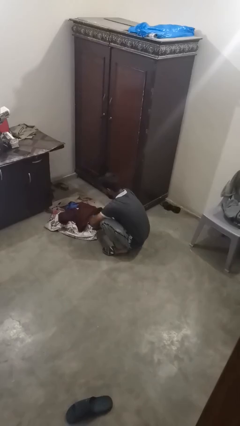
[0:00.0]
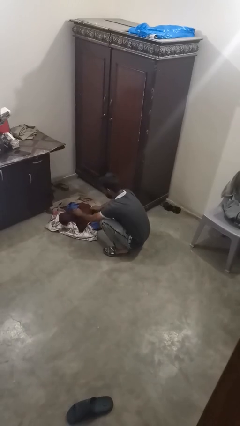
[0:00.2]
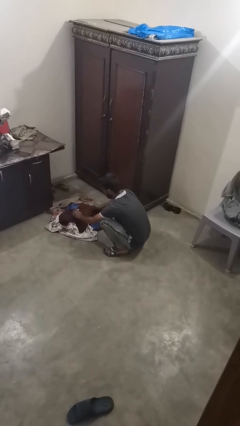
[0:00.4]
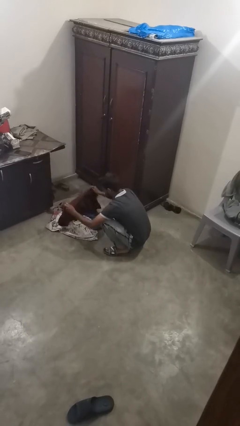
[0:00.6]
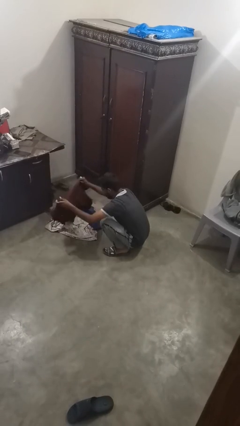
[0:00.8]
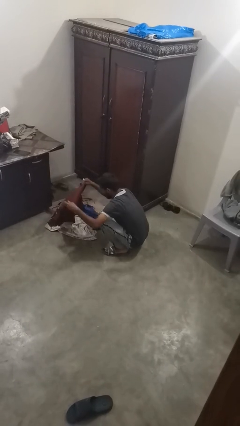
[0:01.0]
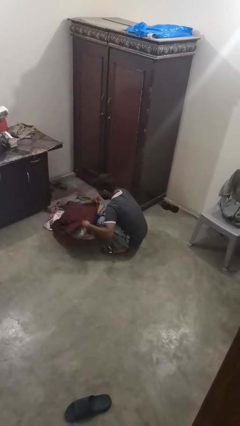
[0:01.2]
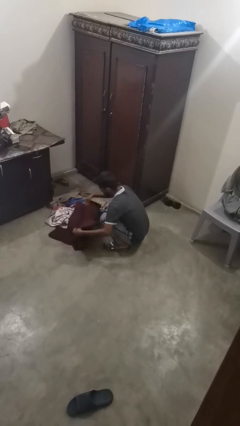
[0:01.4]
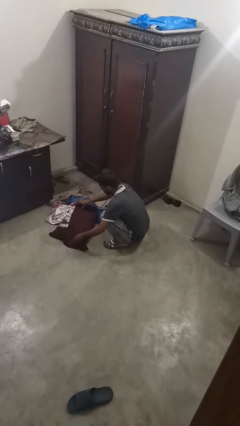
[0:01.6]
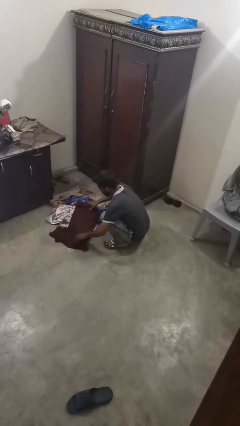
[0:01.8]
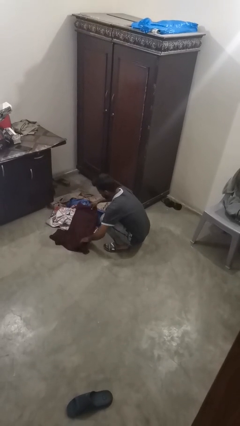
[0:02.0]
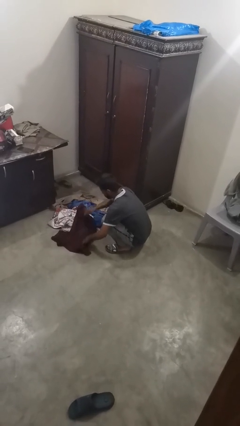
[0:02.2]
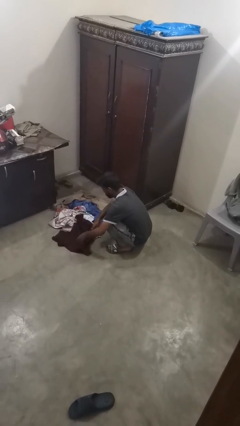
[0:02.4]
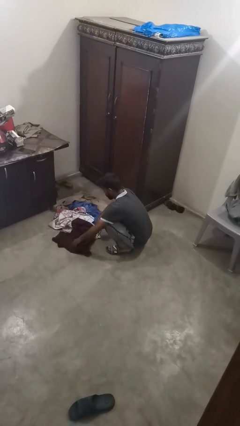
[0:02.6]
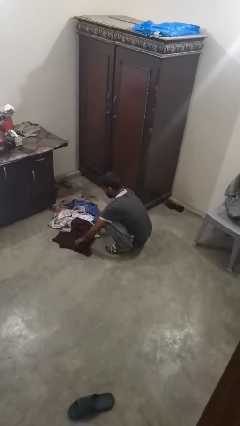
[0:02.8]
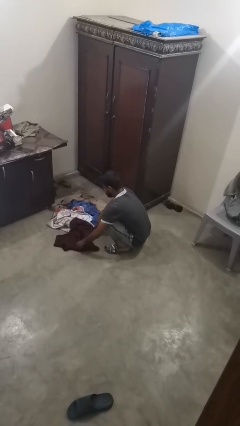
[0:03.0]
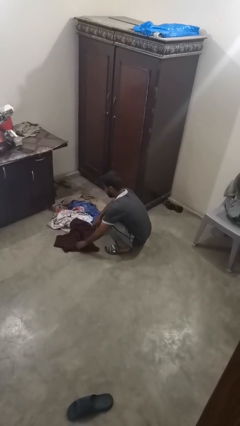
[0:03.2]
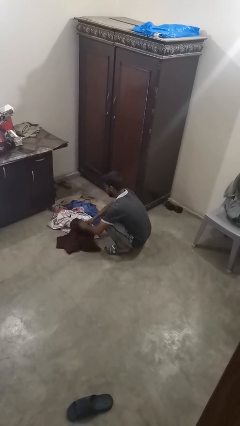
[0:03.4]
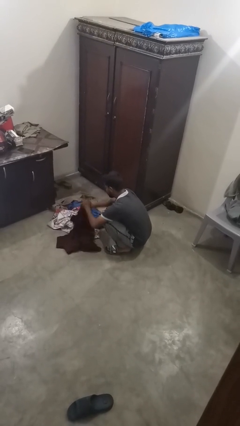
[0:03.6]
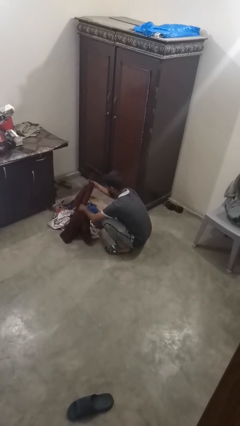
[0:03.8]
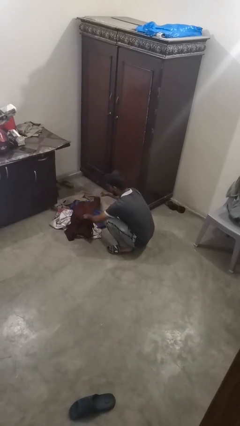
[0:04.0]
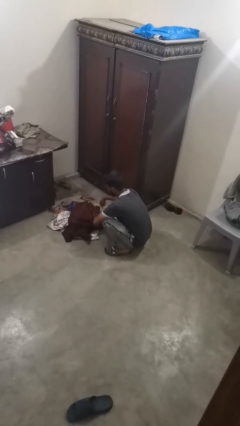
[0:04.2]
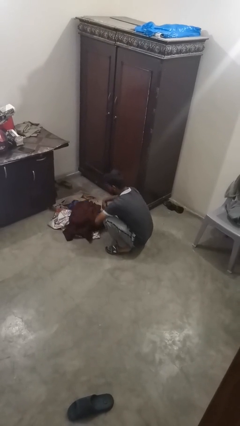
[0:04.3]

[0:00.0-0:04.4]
person folds shirt

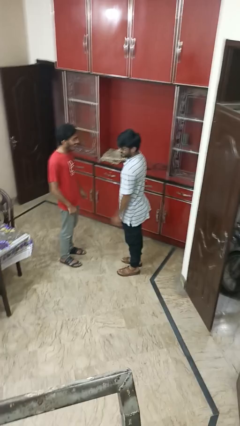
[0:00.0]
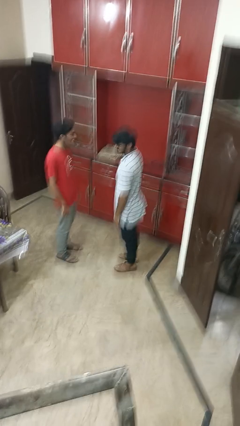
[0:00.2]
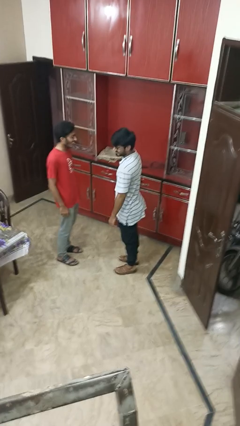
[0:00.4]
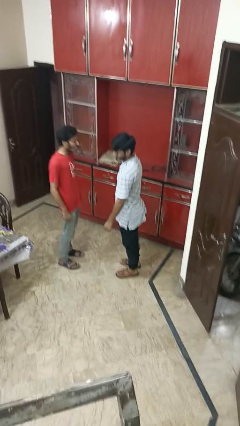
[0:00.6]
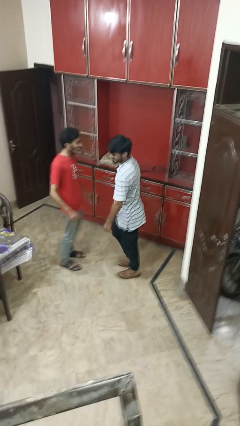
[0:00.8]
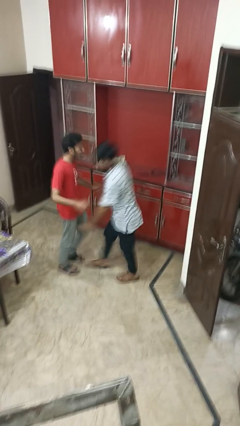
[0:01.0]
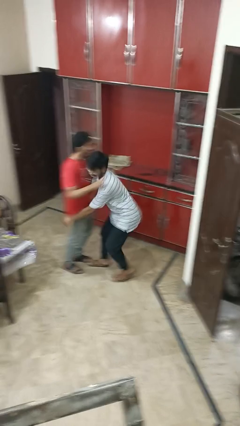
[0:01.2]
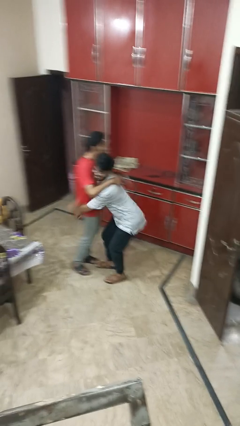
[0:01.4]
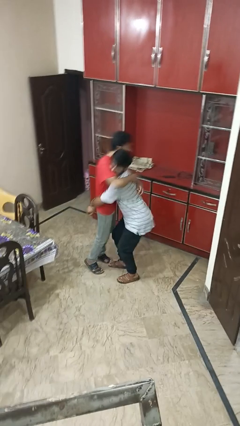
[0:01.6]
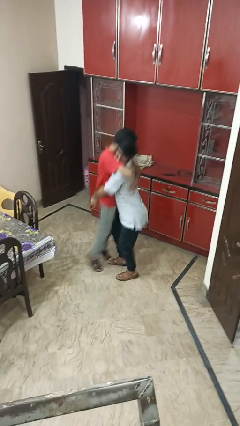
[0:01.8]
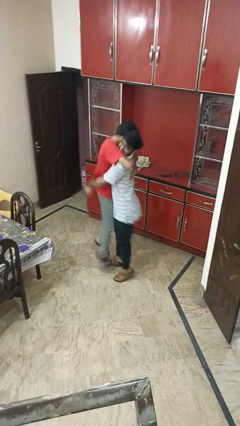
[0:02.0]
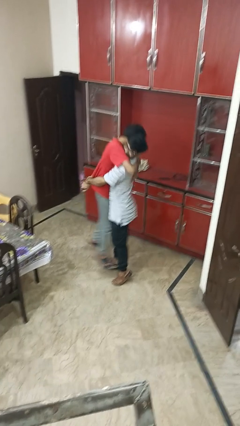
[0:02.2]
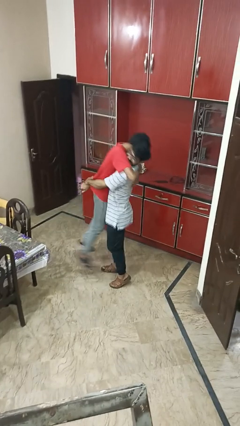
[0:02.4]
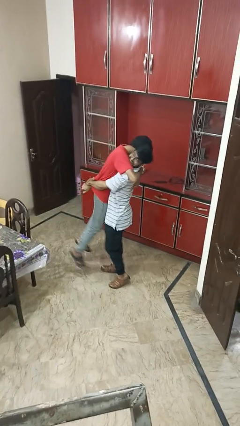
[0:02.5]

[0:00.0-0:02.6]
person picks up person

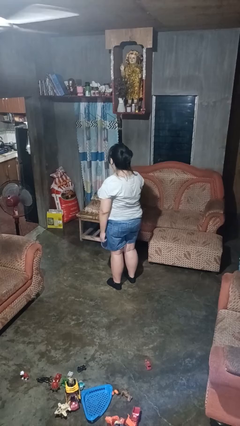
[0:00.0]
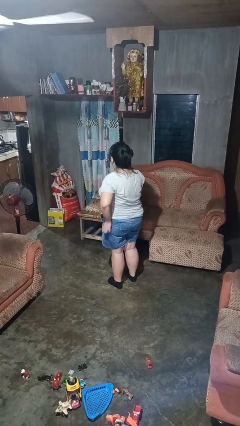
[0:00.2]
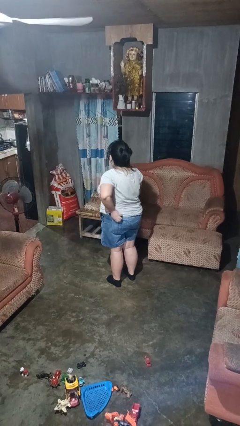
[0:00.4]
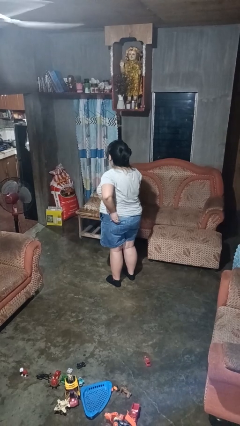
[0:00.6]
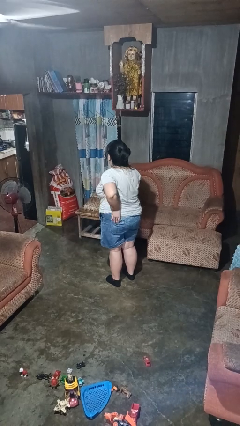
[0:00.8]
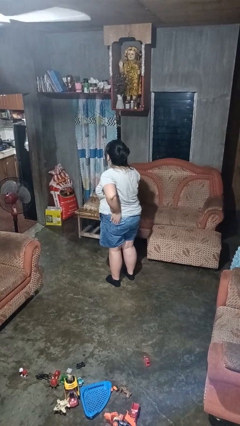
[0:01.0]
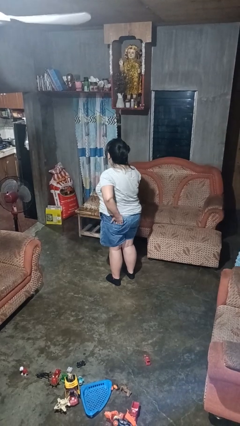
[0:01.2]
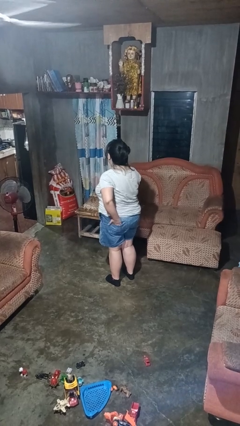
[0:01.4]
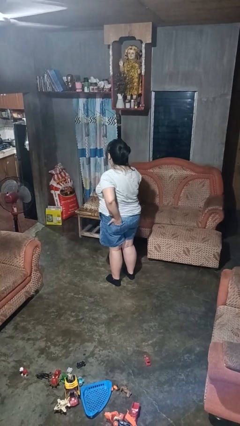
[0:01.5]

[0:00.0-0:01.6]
person puts hands in back pockets

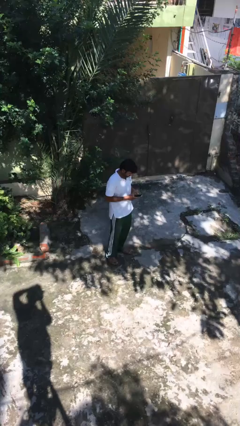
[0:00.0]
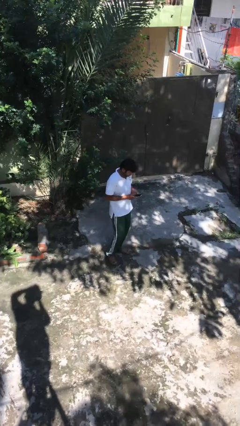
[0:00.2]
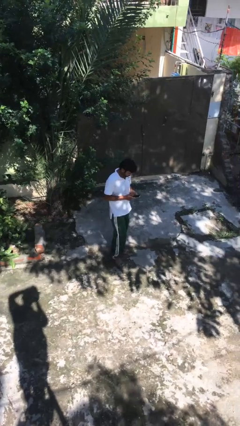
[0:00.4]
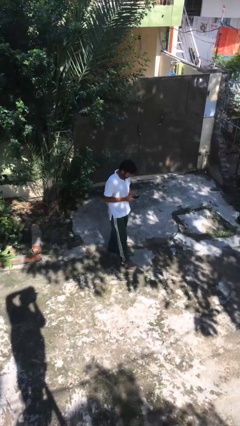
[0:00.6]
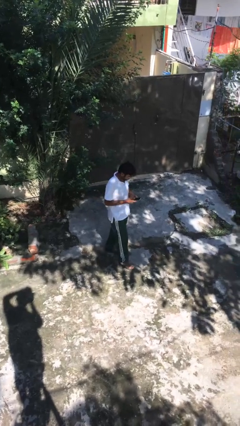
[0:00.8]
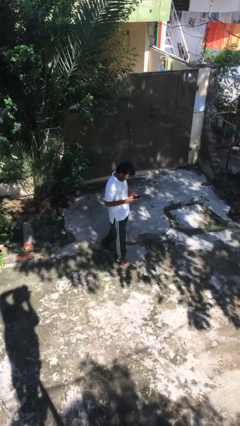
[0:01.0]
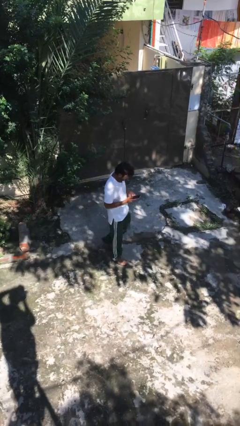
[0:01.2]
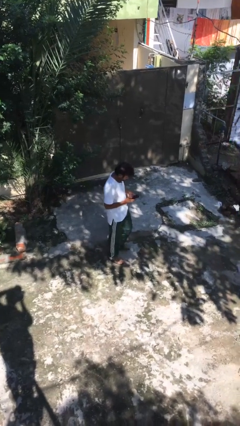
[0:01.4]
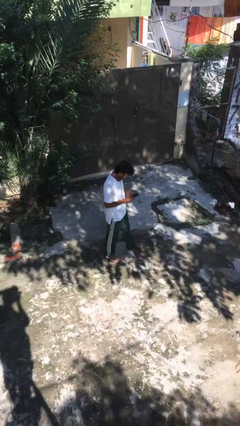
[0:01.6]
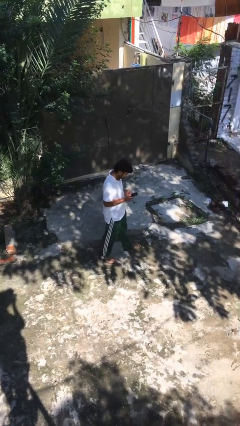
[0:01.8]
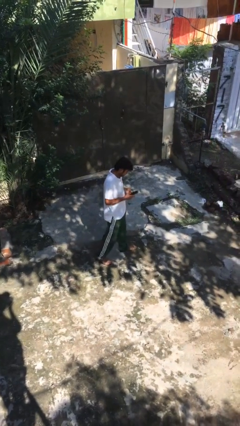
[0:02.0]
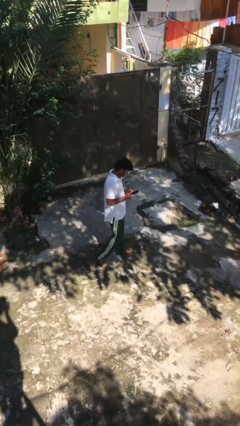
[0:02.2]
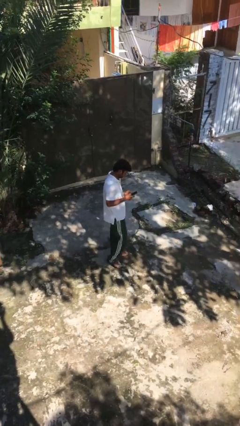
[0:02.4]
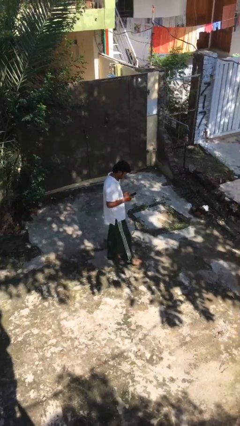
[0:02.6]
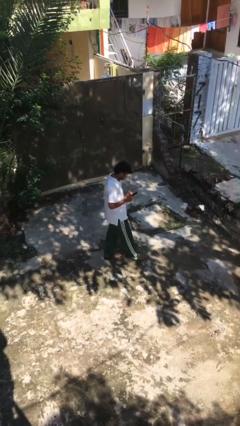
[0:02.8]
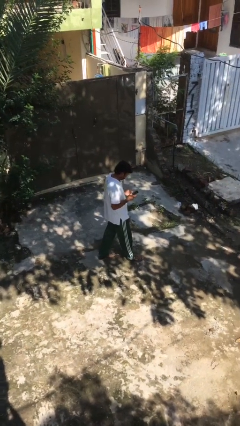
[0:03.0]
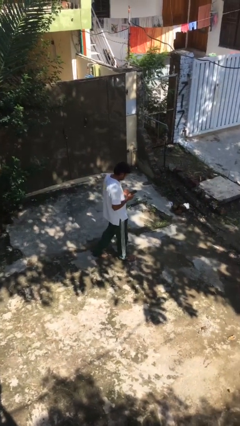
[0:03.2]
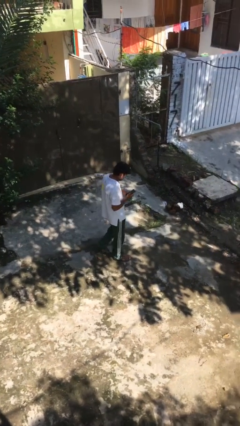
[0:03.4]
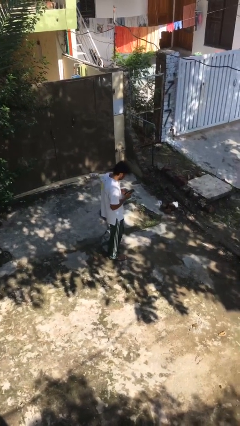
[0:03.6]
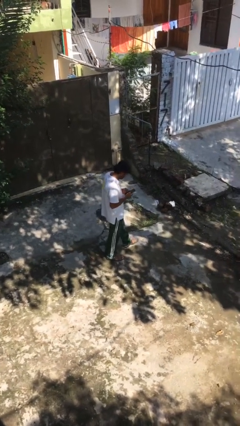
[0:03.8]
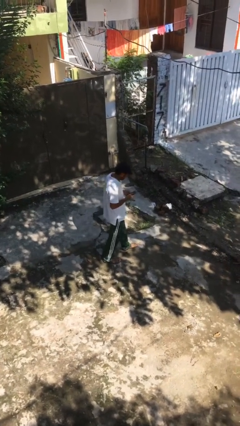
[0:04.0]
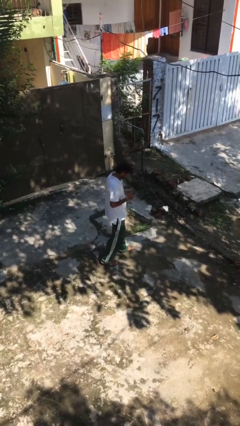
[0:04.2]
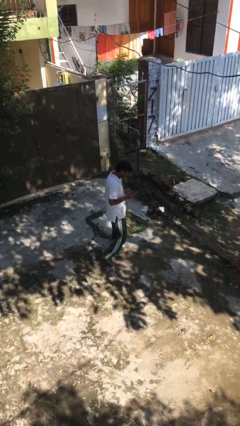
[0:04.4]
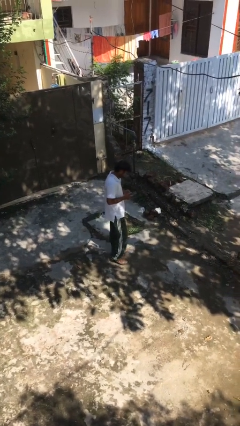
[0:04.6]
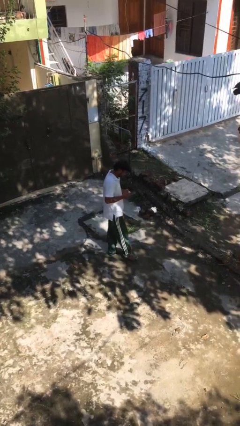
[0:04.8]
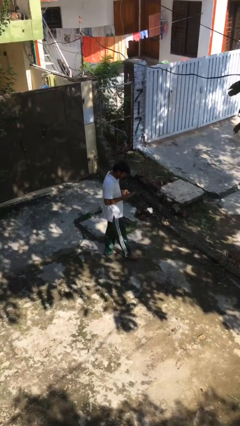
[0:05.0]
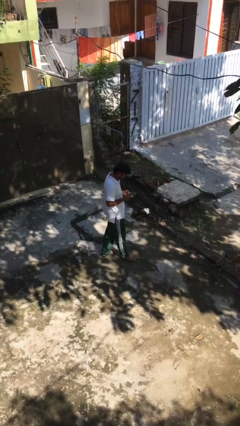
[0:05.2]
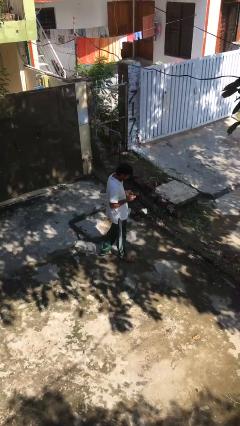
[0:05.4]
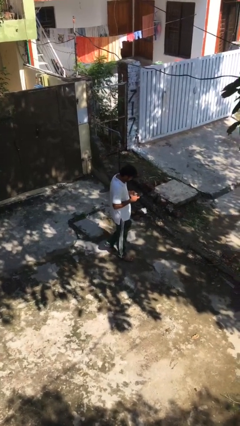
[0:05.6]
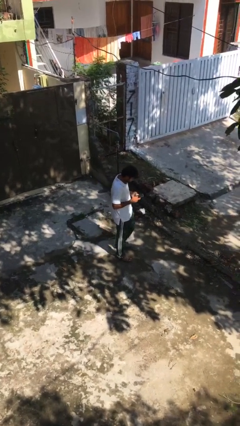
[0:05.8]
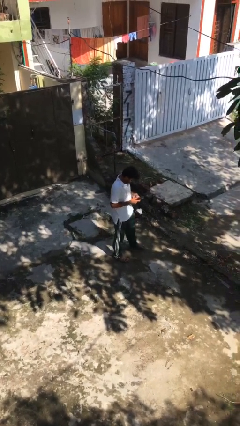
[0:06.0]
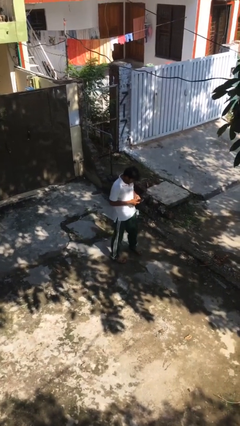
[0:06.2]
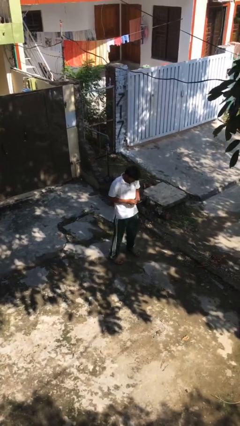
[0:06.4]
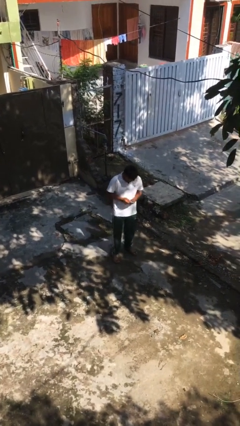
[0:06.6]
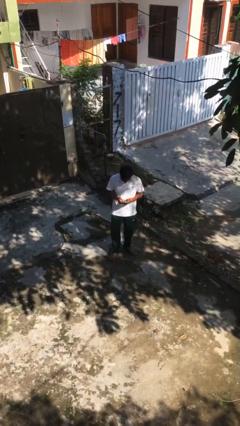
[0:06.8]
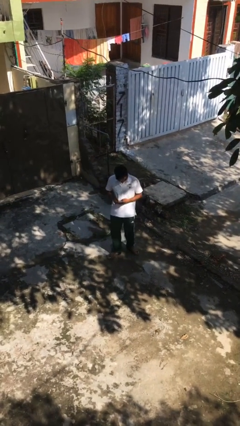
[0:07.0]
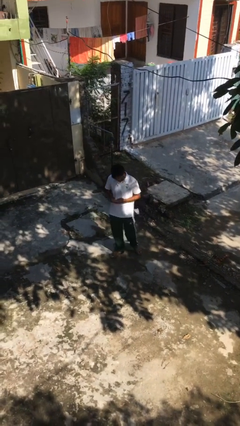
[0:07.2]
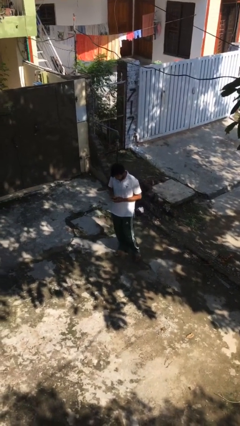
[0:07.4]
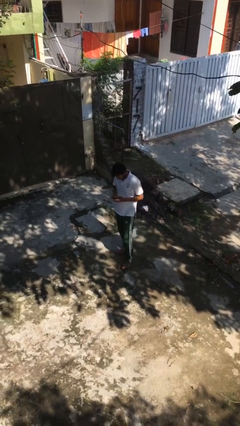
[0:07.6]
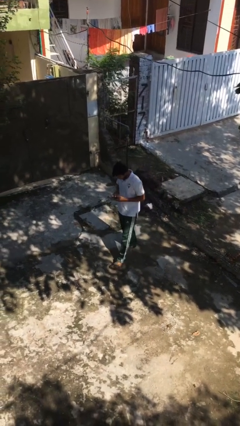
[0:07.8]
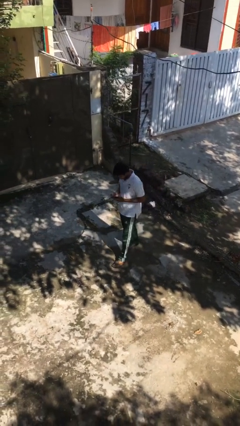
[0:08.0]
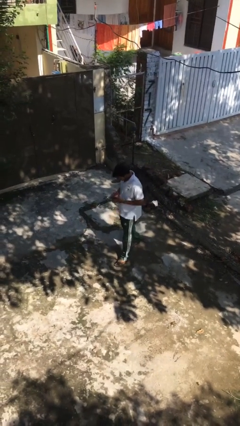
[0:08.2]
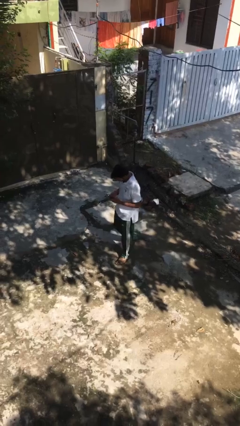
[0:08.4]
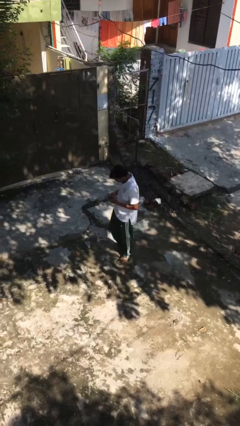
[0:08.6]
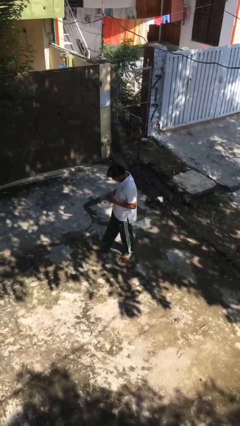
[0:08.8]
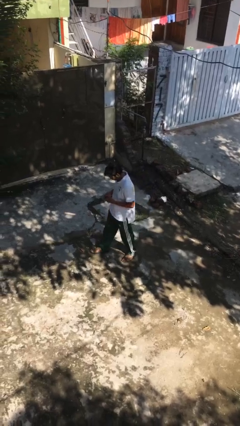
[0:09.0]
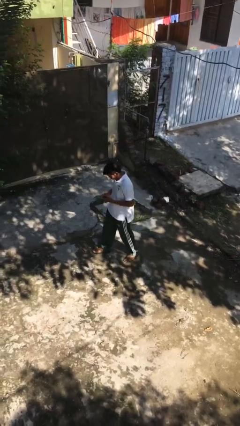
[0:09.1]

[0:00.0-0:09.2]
person texts on phone

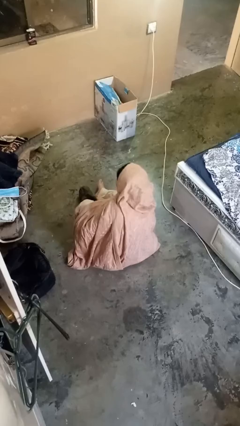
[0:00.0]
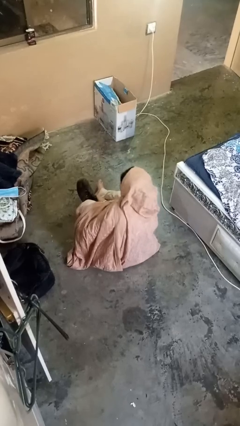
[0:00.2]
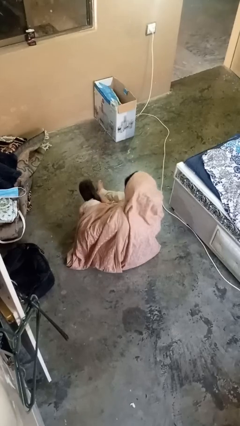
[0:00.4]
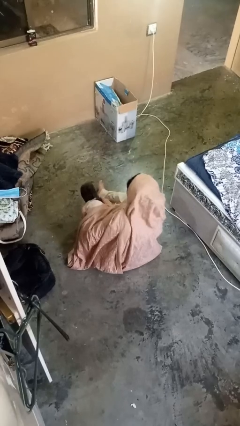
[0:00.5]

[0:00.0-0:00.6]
person puts on shoes
